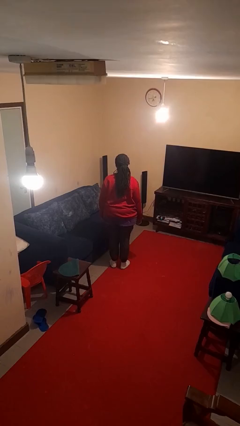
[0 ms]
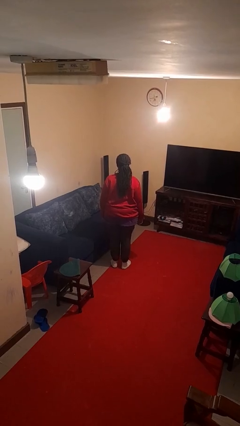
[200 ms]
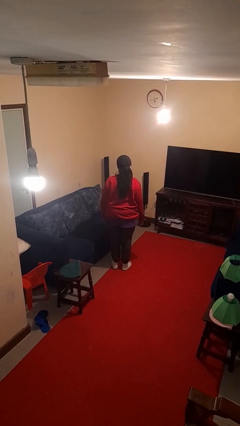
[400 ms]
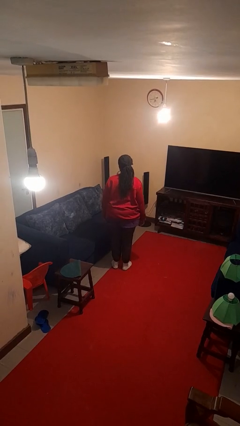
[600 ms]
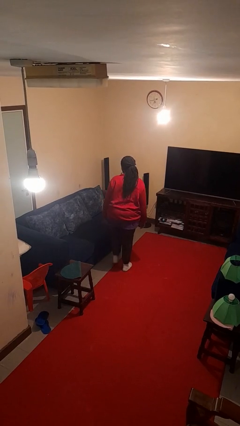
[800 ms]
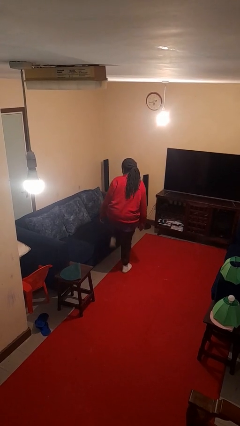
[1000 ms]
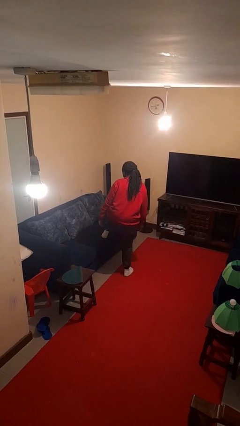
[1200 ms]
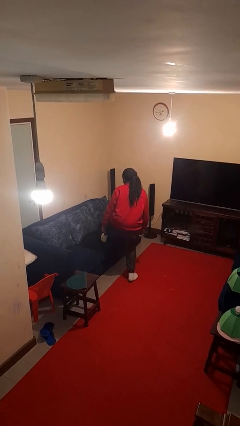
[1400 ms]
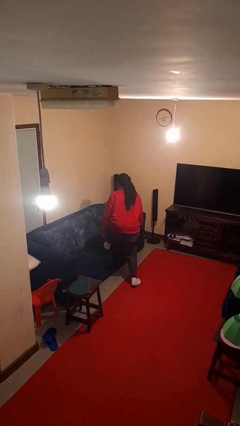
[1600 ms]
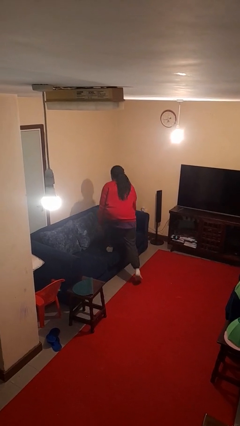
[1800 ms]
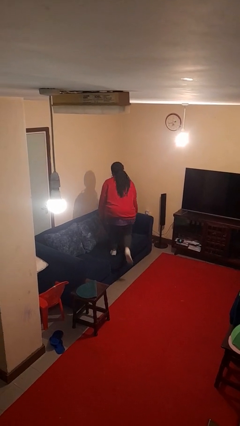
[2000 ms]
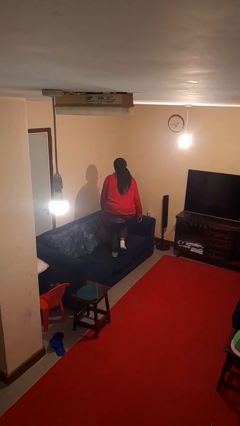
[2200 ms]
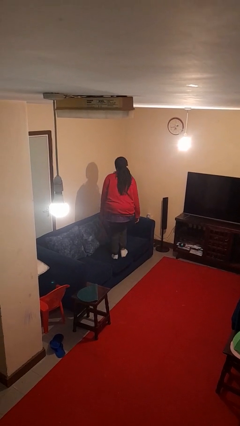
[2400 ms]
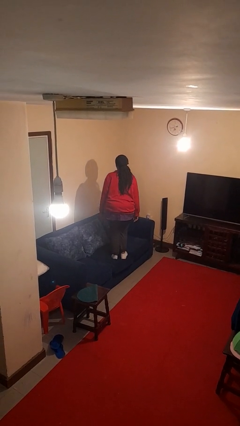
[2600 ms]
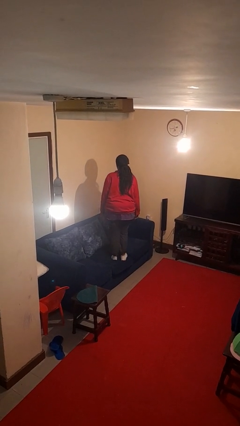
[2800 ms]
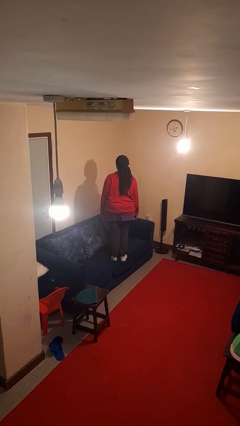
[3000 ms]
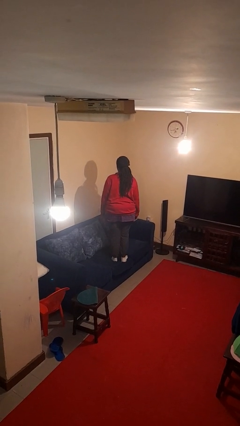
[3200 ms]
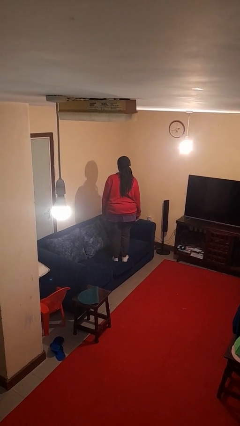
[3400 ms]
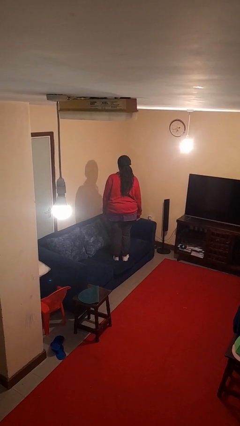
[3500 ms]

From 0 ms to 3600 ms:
person climbs on couch

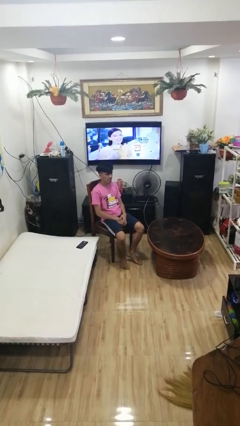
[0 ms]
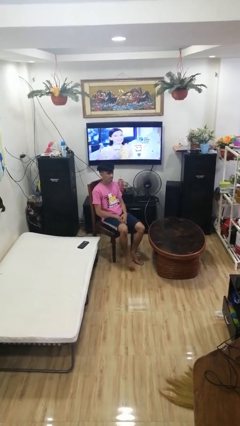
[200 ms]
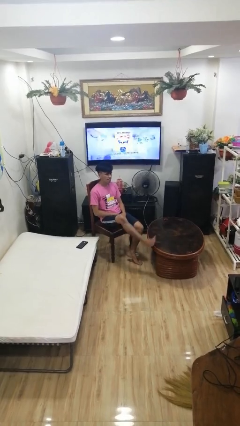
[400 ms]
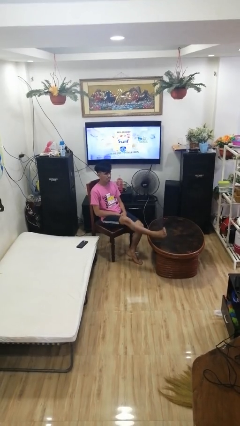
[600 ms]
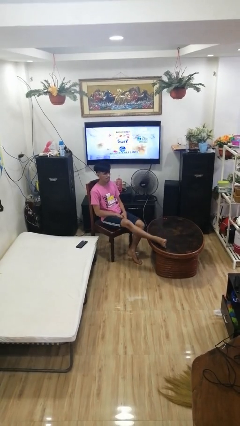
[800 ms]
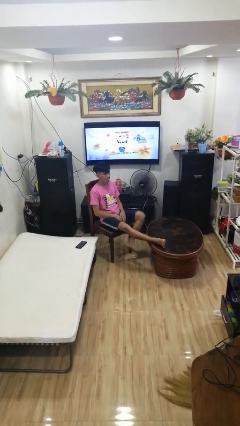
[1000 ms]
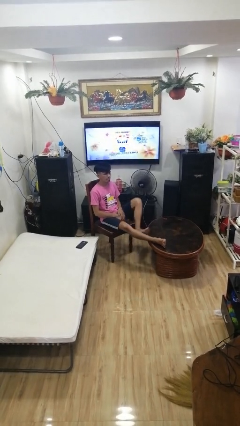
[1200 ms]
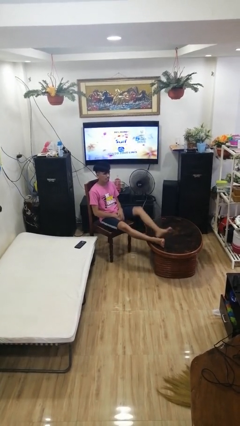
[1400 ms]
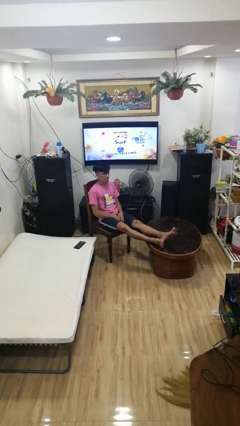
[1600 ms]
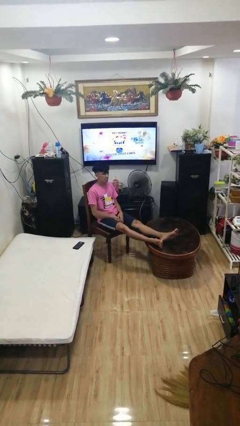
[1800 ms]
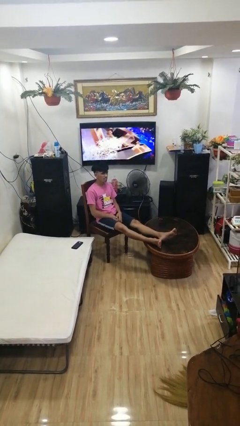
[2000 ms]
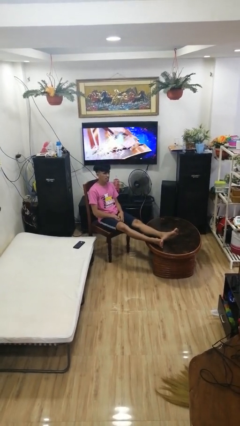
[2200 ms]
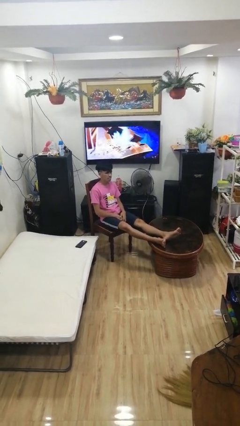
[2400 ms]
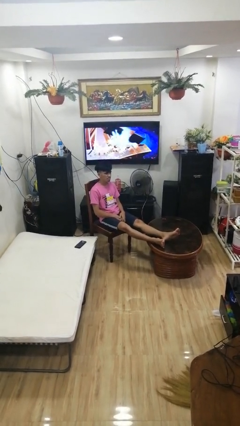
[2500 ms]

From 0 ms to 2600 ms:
person puts feet up

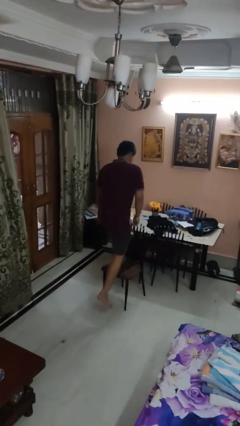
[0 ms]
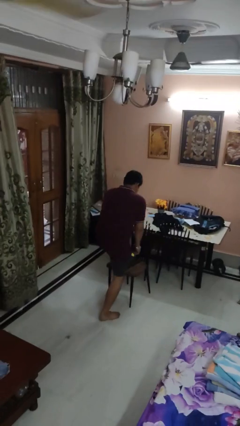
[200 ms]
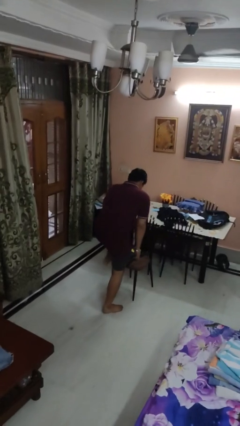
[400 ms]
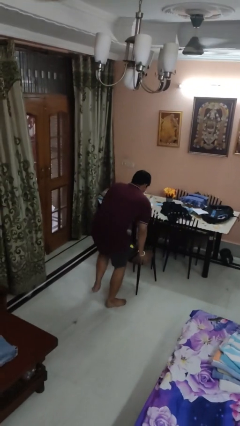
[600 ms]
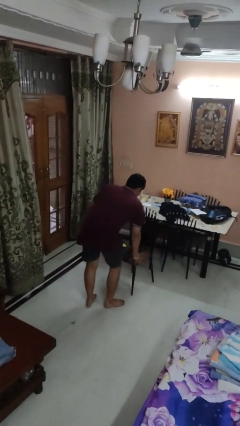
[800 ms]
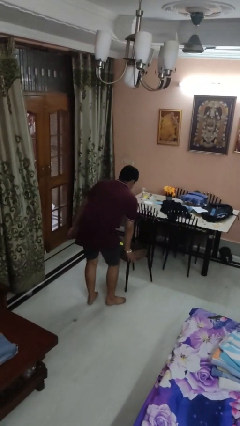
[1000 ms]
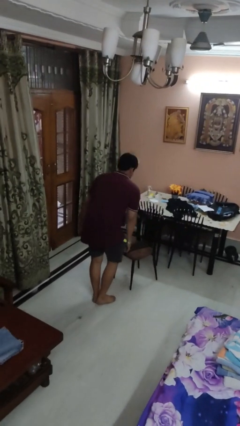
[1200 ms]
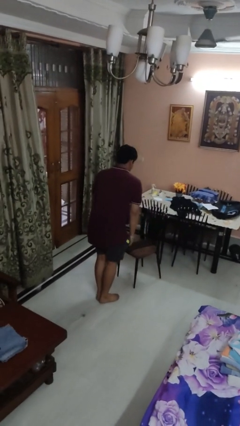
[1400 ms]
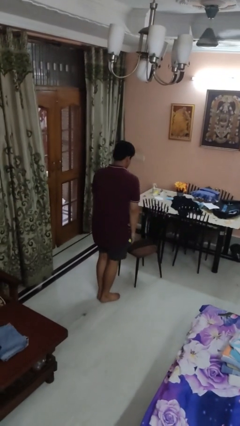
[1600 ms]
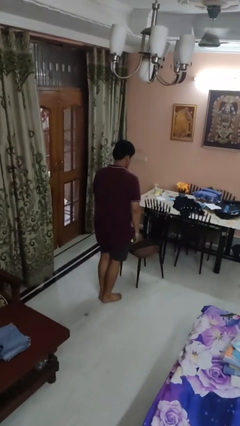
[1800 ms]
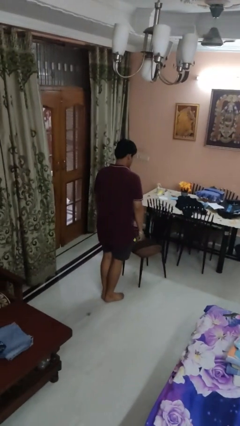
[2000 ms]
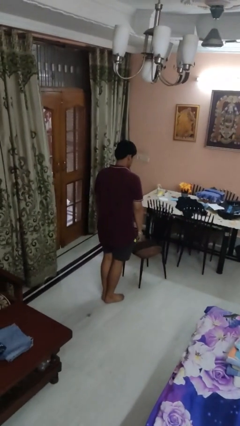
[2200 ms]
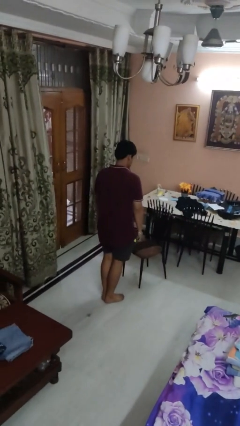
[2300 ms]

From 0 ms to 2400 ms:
person climbs off chair

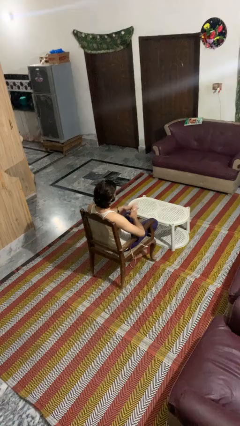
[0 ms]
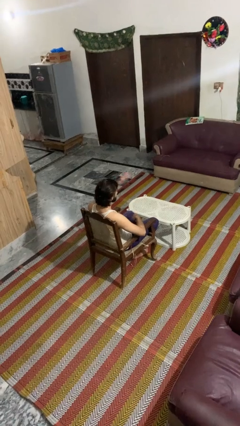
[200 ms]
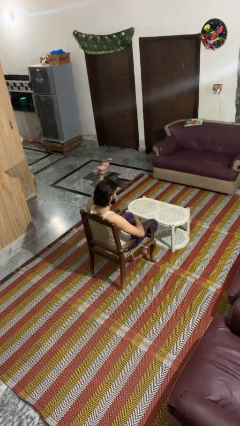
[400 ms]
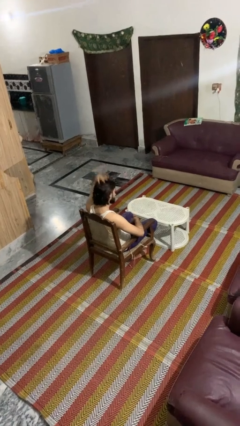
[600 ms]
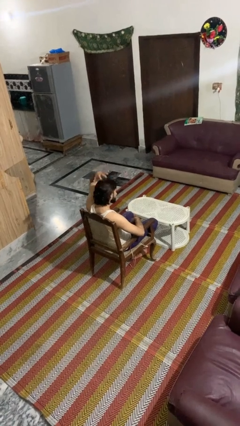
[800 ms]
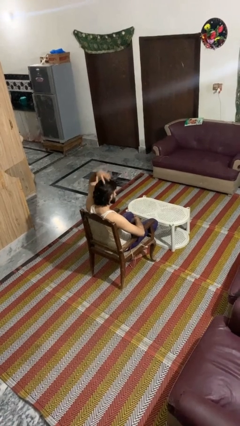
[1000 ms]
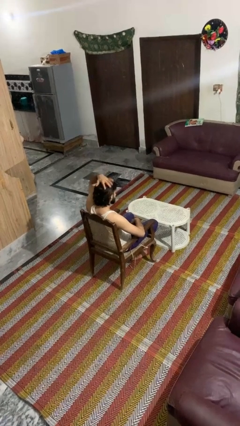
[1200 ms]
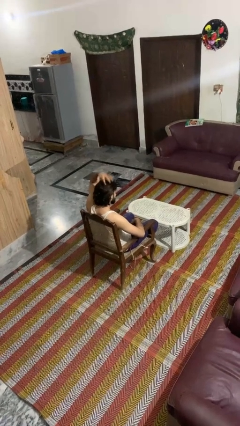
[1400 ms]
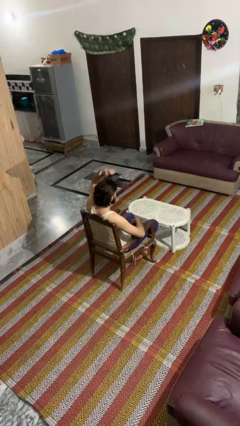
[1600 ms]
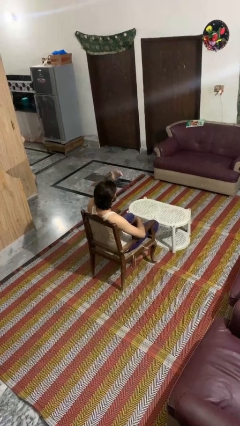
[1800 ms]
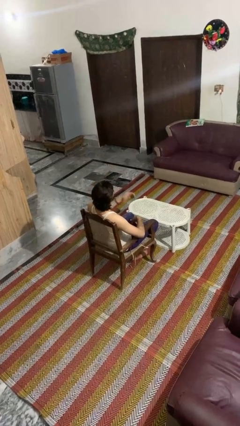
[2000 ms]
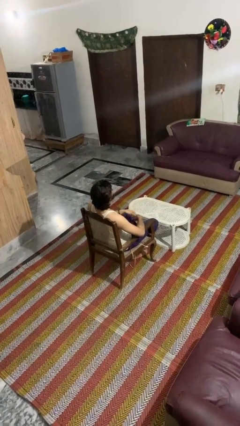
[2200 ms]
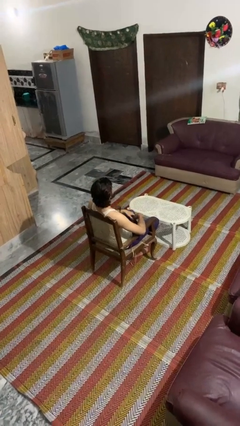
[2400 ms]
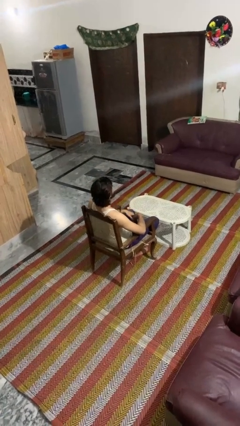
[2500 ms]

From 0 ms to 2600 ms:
person pats head

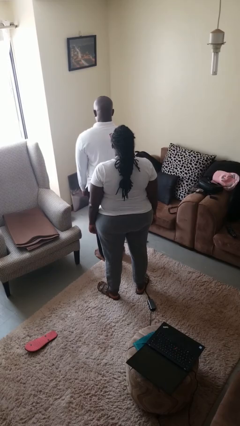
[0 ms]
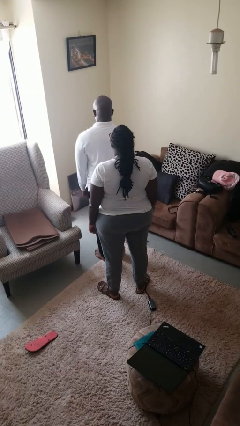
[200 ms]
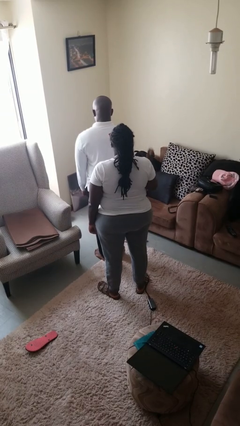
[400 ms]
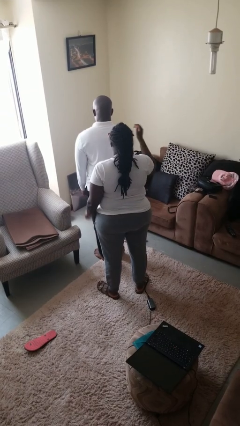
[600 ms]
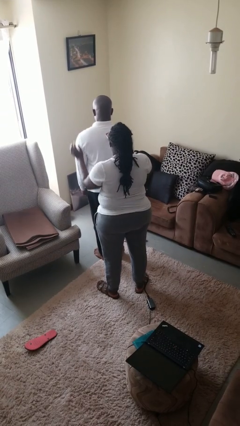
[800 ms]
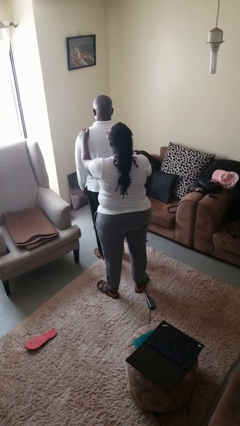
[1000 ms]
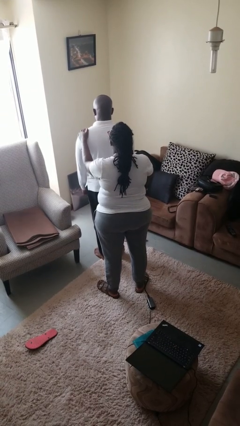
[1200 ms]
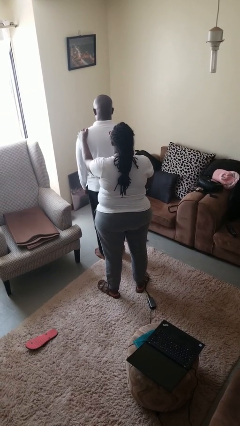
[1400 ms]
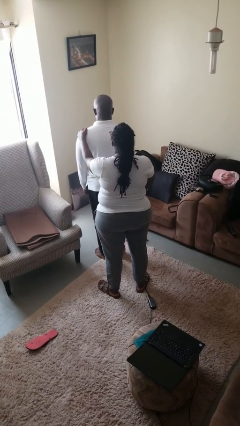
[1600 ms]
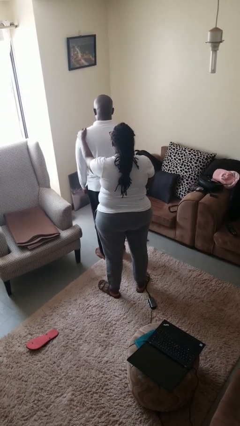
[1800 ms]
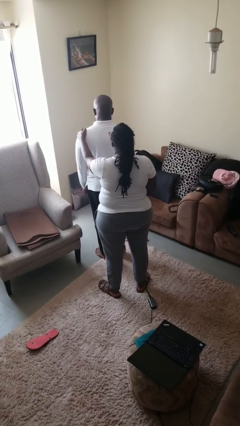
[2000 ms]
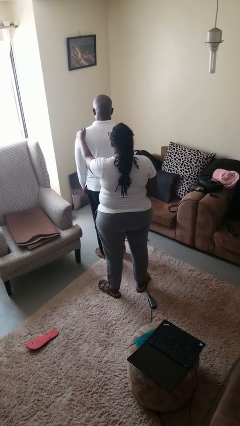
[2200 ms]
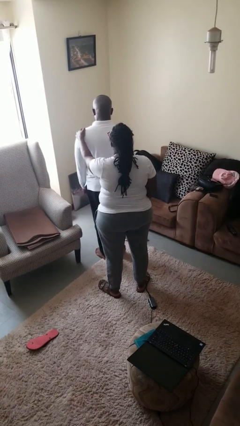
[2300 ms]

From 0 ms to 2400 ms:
person grabs person by shoulder

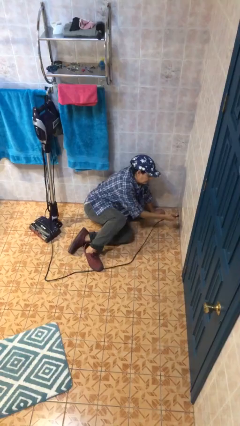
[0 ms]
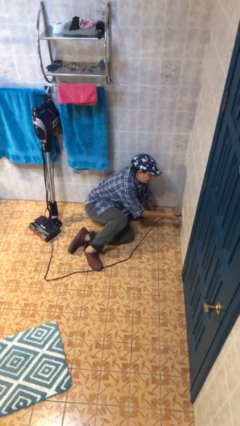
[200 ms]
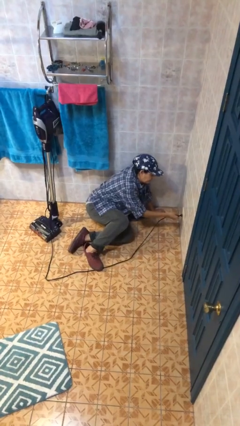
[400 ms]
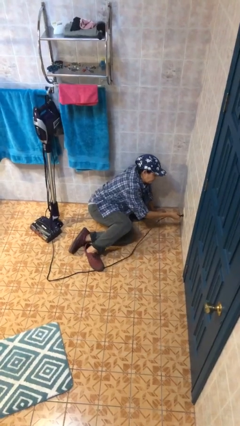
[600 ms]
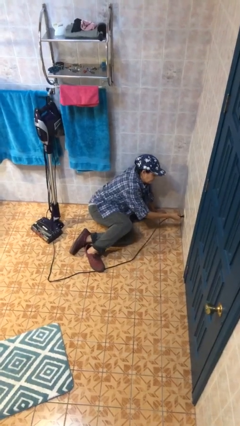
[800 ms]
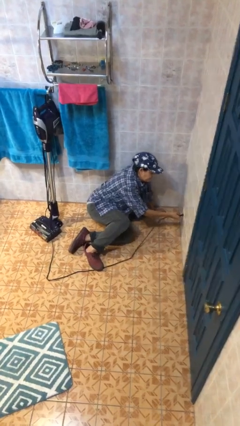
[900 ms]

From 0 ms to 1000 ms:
person plugs into electrical socket

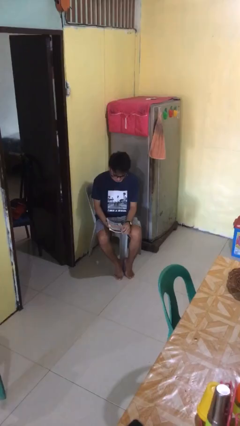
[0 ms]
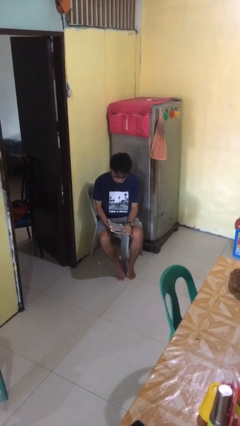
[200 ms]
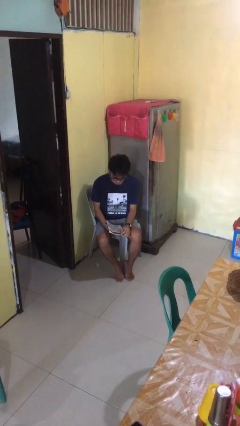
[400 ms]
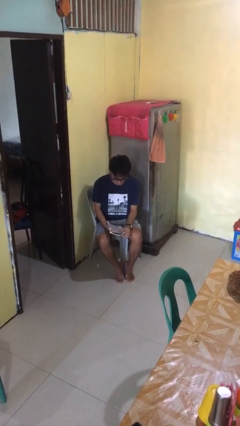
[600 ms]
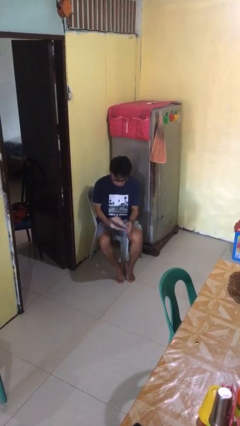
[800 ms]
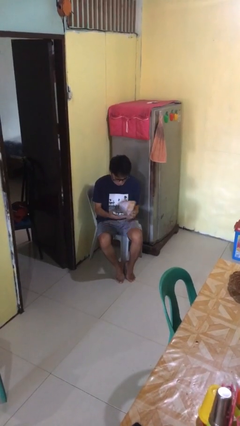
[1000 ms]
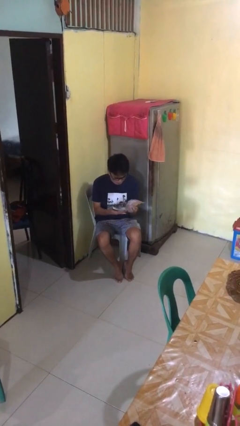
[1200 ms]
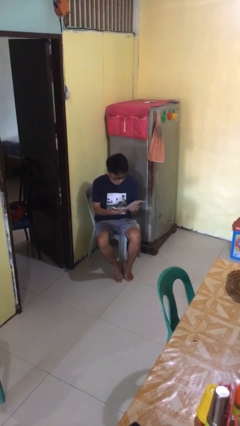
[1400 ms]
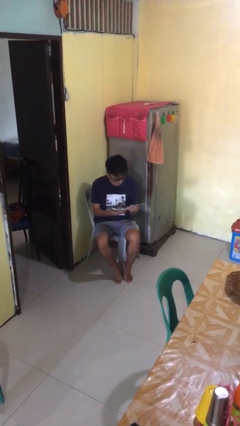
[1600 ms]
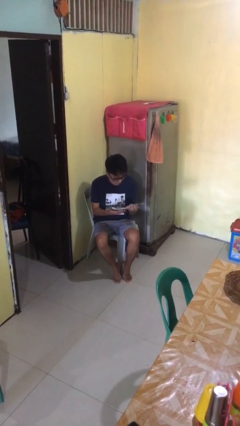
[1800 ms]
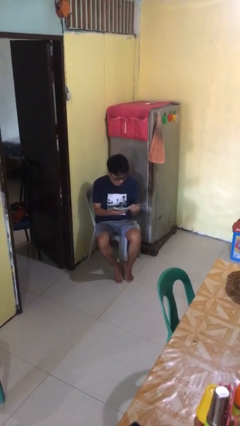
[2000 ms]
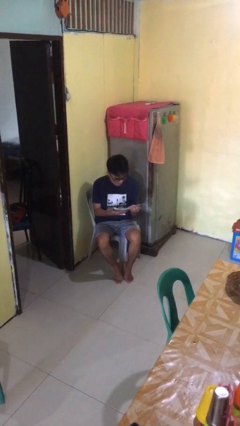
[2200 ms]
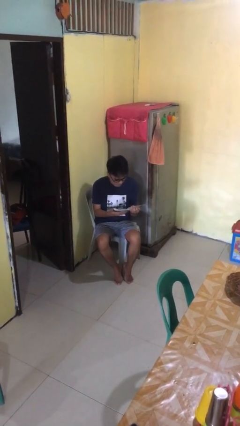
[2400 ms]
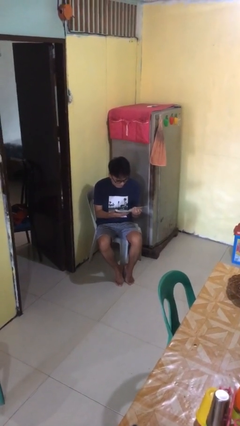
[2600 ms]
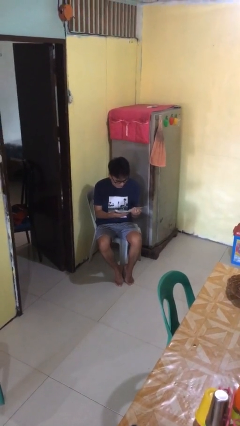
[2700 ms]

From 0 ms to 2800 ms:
person reads magazine
